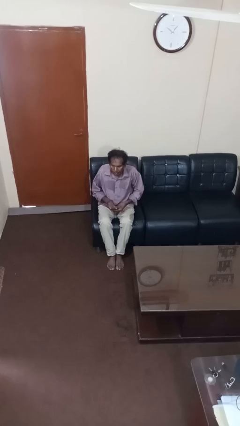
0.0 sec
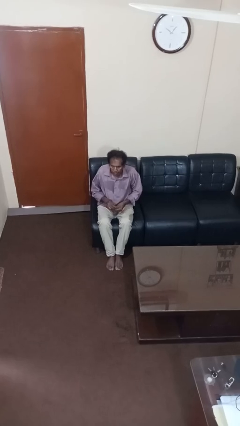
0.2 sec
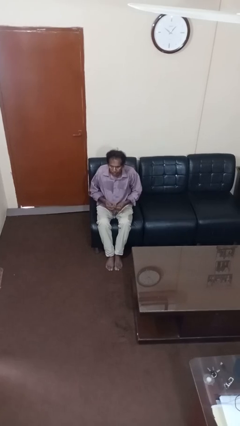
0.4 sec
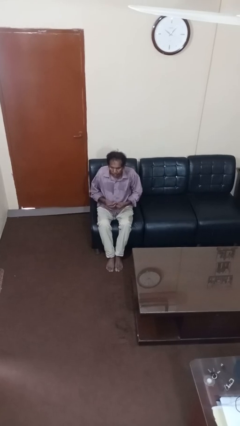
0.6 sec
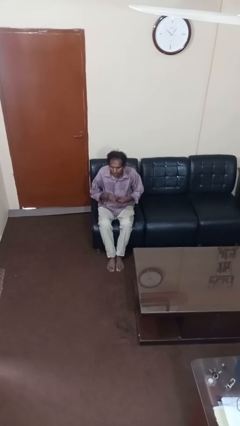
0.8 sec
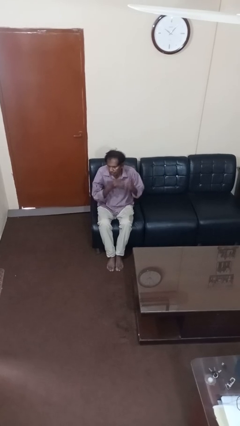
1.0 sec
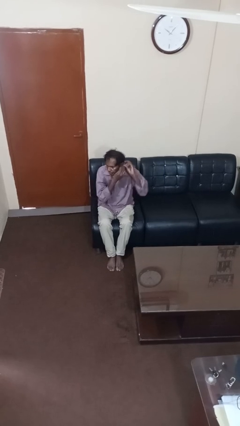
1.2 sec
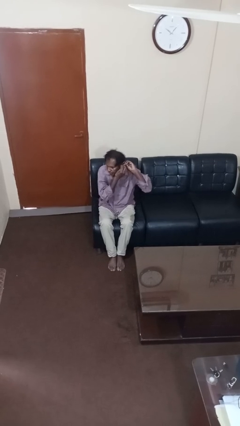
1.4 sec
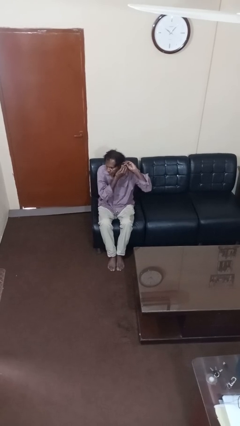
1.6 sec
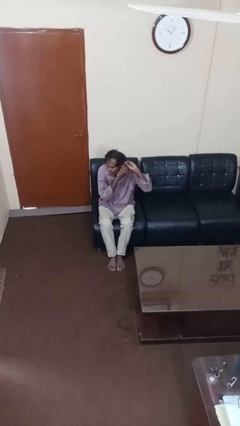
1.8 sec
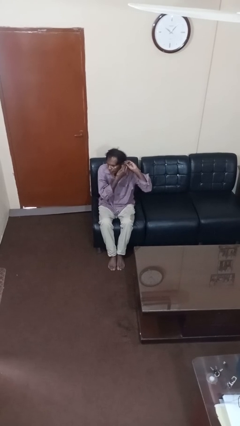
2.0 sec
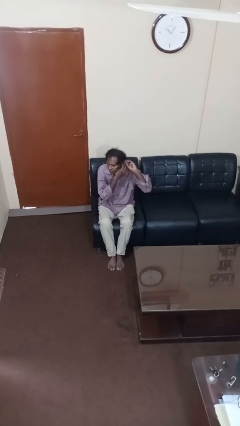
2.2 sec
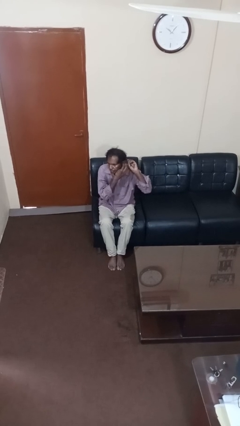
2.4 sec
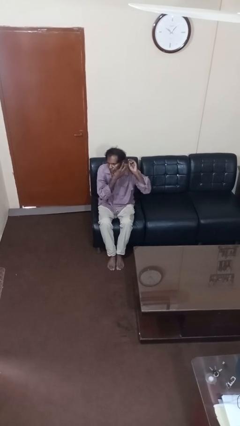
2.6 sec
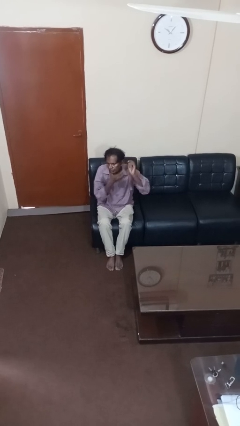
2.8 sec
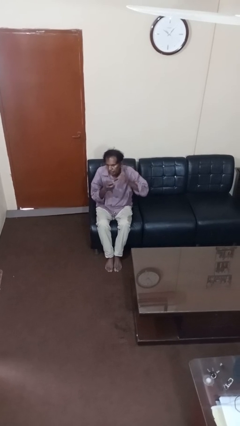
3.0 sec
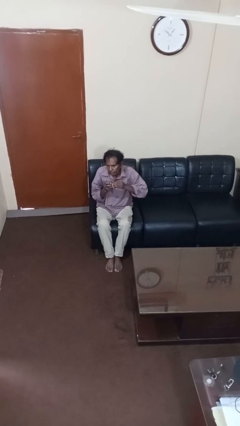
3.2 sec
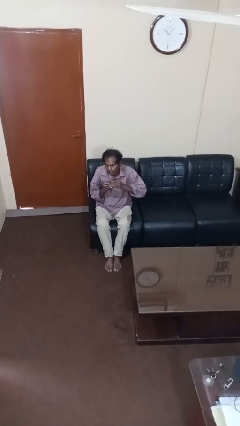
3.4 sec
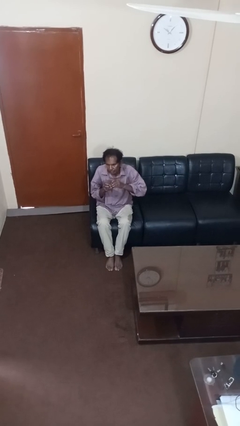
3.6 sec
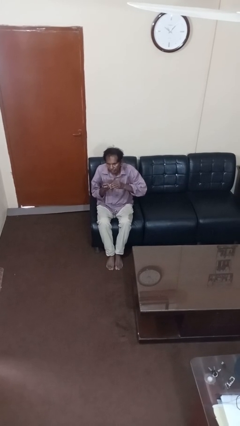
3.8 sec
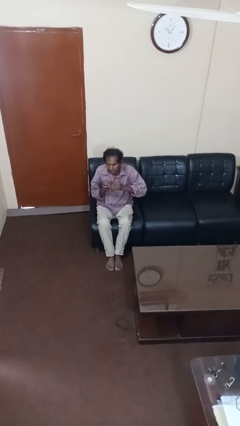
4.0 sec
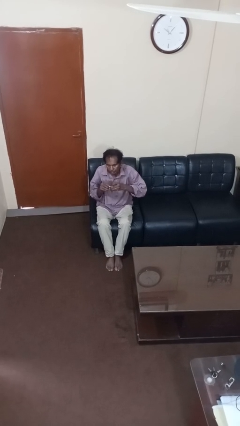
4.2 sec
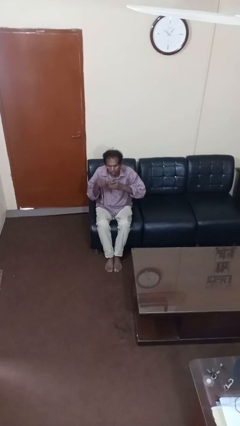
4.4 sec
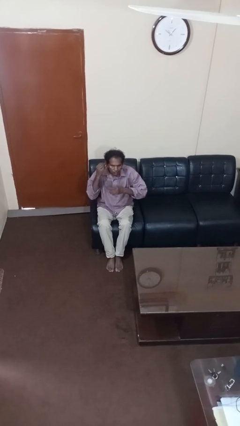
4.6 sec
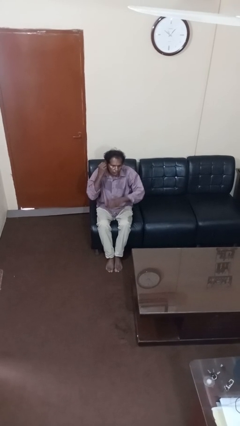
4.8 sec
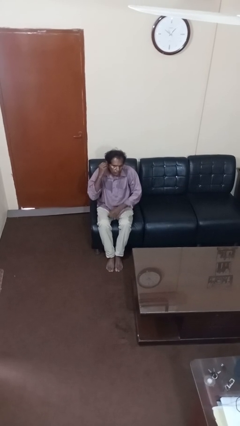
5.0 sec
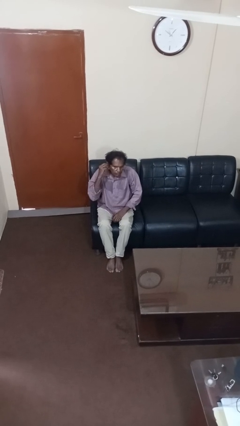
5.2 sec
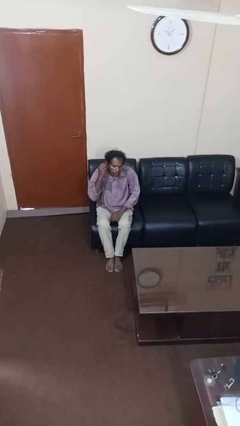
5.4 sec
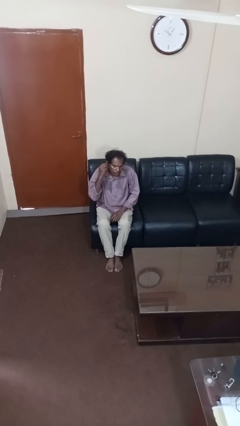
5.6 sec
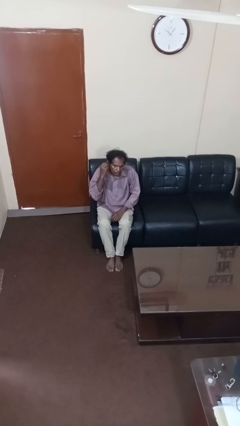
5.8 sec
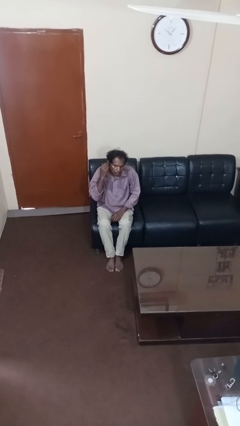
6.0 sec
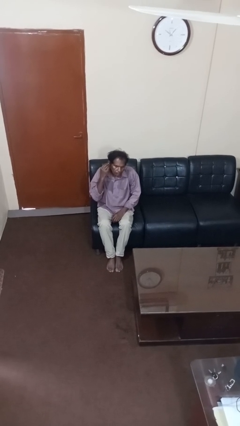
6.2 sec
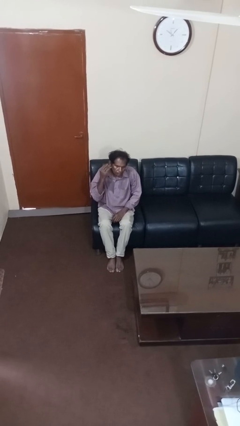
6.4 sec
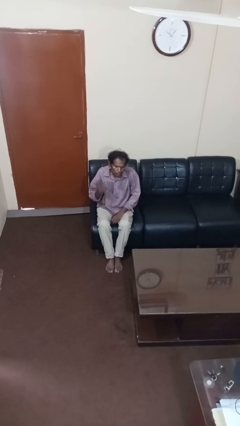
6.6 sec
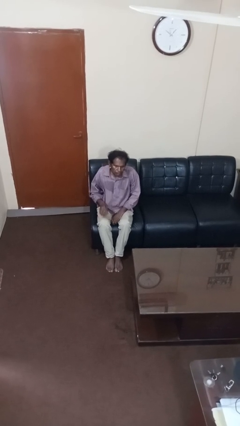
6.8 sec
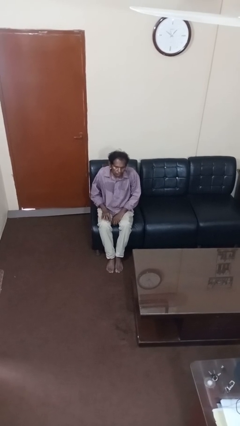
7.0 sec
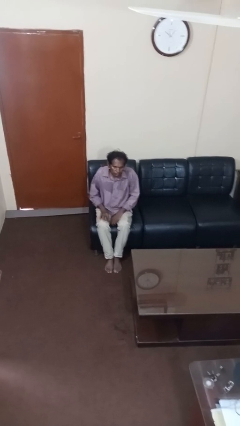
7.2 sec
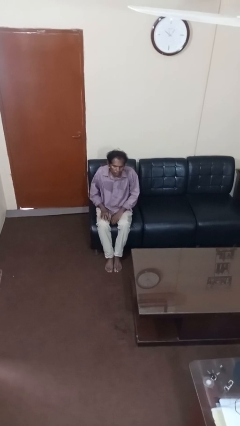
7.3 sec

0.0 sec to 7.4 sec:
person puts on earrings

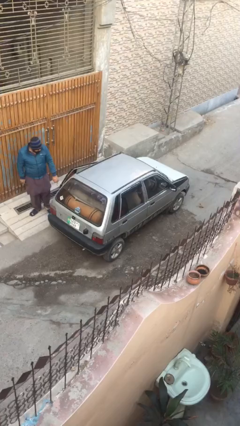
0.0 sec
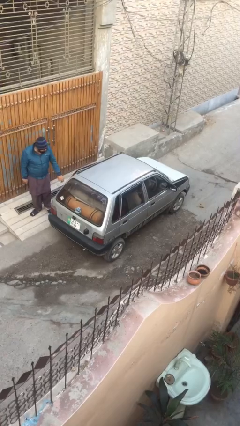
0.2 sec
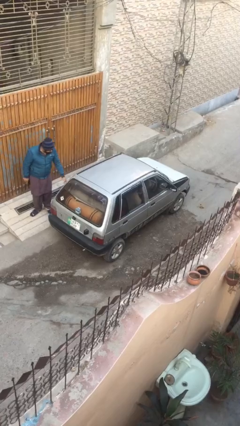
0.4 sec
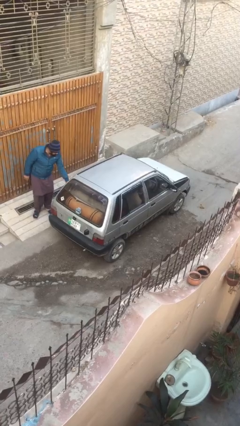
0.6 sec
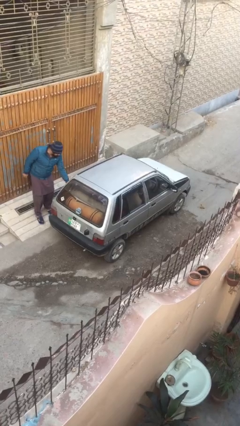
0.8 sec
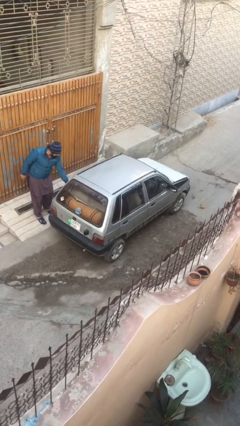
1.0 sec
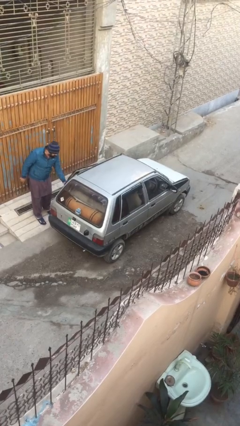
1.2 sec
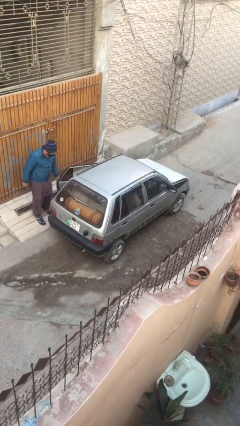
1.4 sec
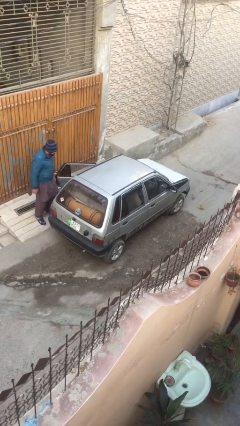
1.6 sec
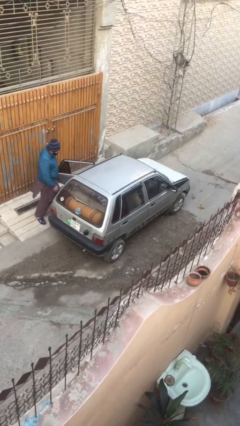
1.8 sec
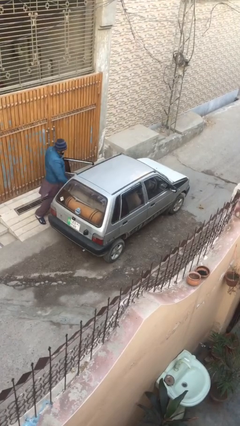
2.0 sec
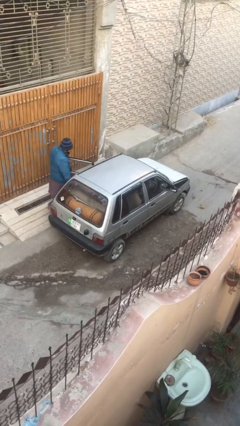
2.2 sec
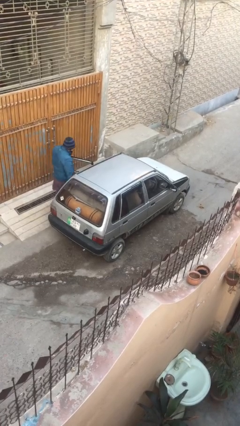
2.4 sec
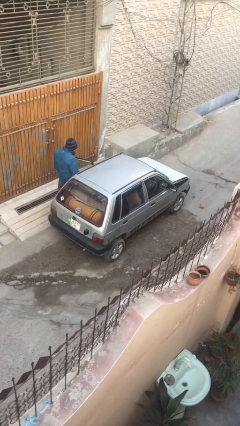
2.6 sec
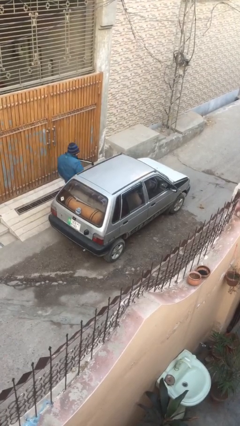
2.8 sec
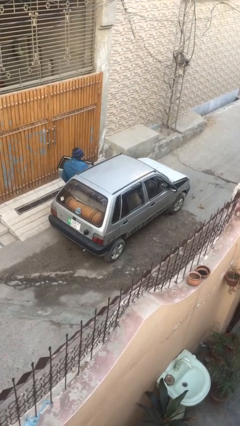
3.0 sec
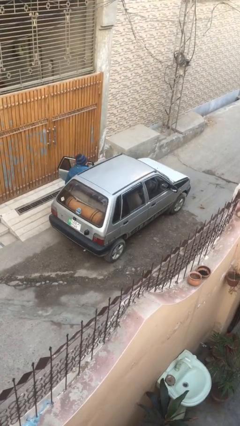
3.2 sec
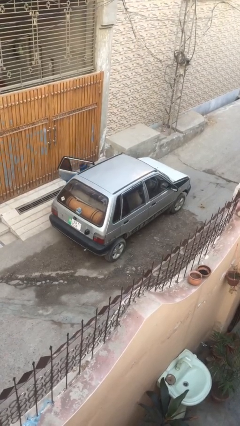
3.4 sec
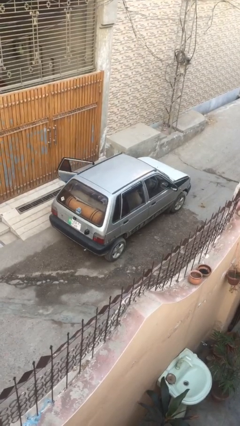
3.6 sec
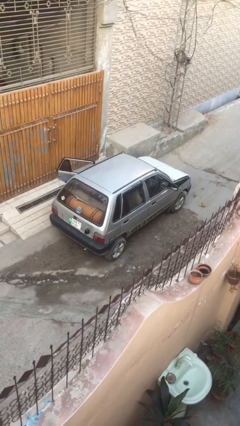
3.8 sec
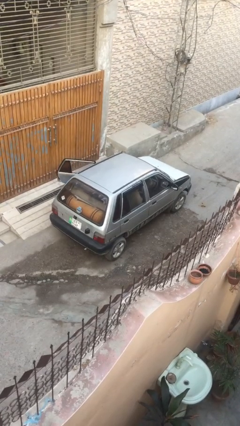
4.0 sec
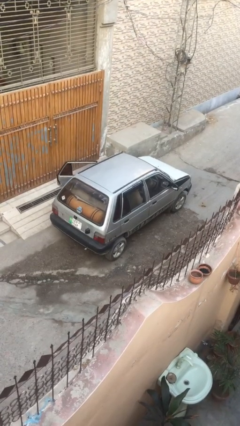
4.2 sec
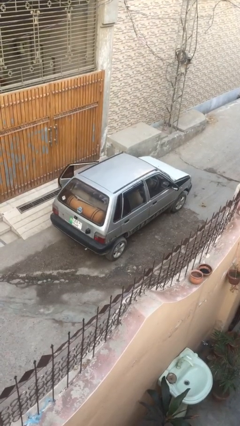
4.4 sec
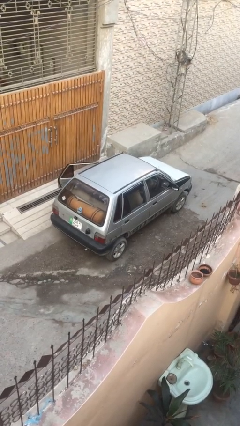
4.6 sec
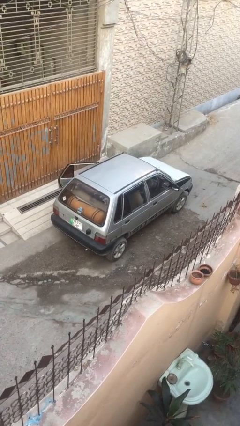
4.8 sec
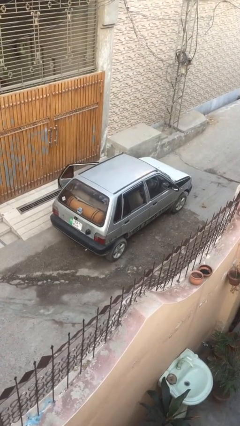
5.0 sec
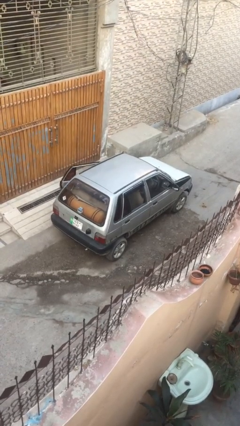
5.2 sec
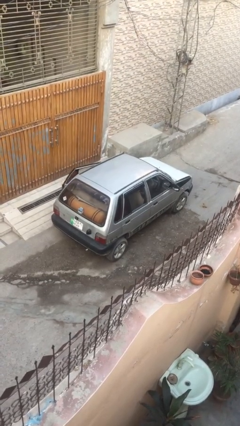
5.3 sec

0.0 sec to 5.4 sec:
car picks up person

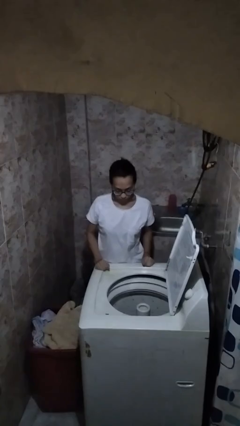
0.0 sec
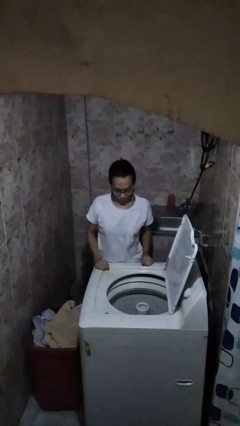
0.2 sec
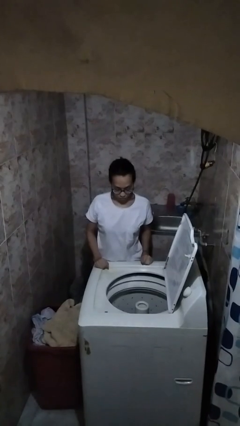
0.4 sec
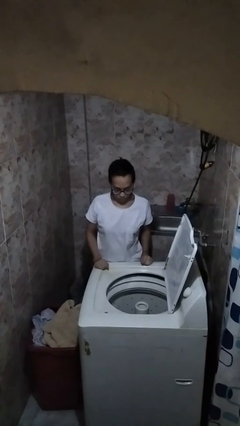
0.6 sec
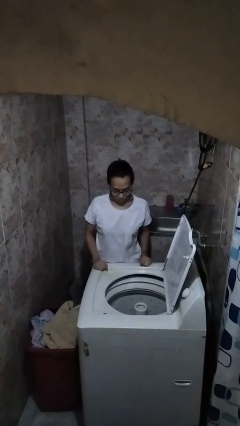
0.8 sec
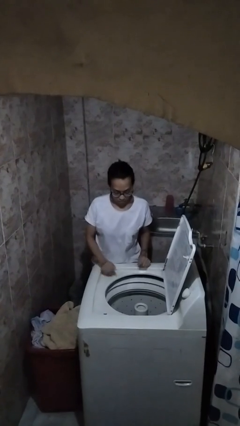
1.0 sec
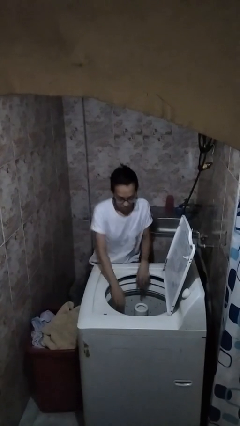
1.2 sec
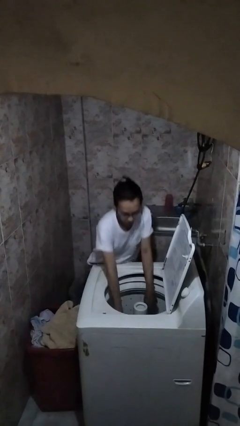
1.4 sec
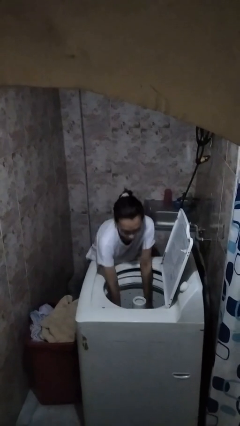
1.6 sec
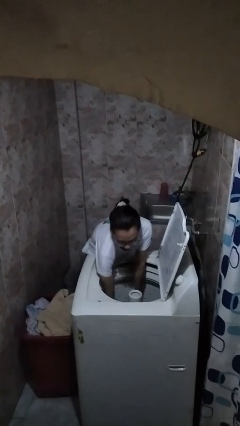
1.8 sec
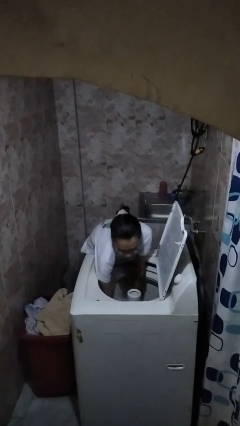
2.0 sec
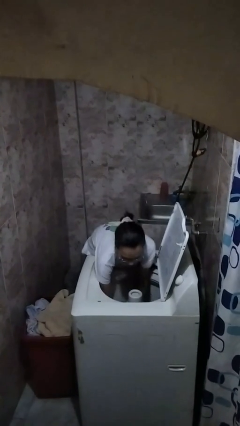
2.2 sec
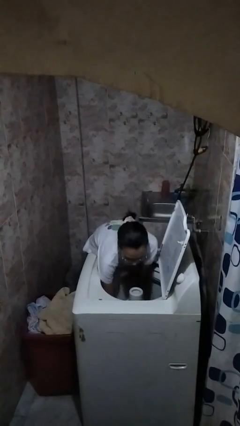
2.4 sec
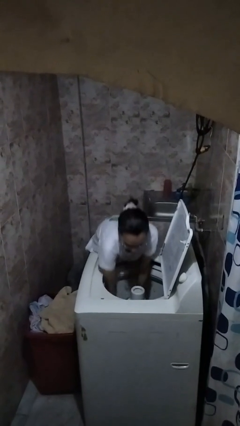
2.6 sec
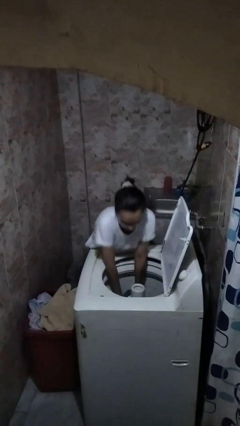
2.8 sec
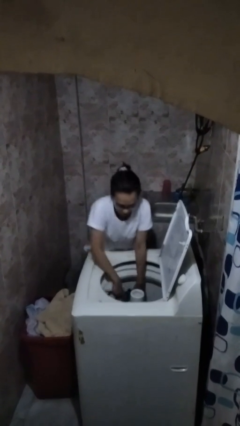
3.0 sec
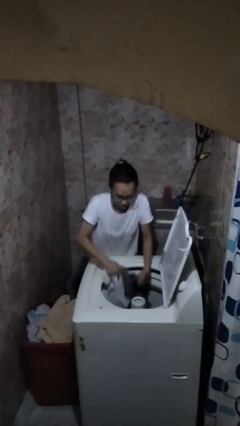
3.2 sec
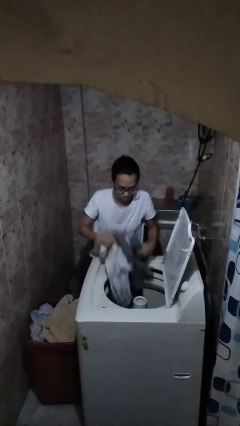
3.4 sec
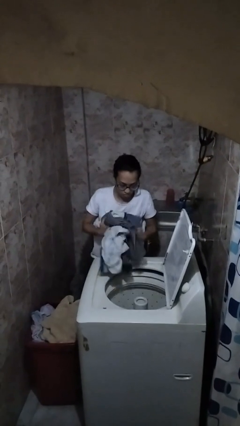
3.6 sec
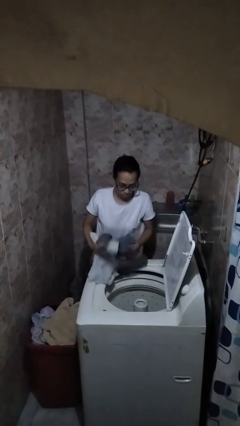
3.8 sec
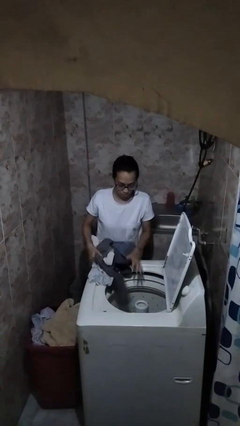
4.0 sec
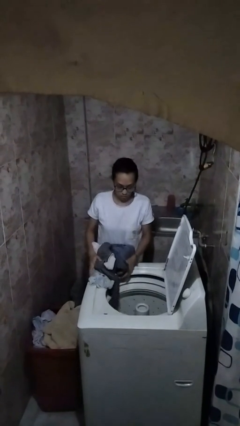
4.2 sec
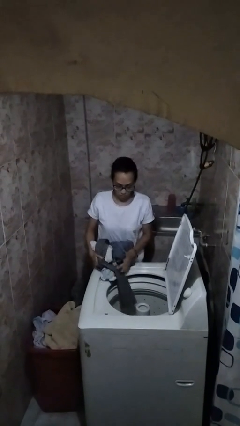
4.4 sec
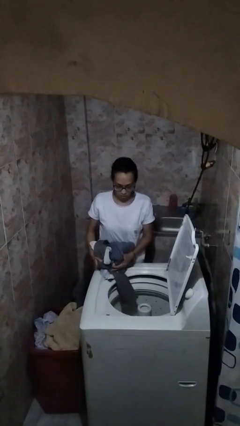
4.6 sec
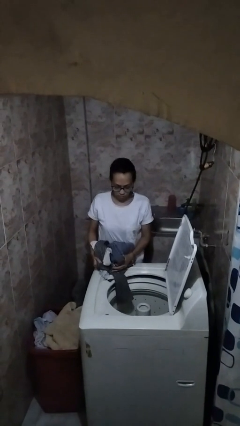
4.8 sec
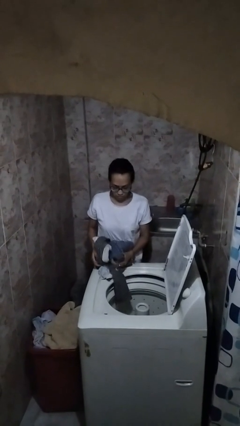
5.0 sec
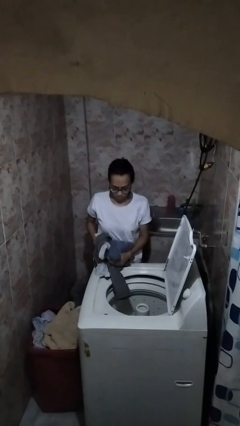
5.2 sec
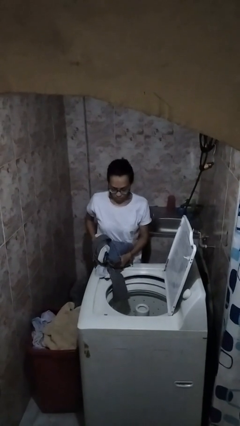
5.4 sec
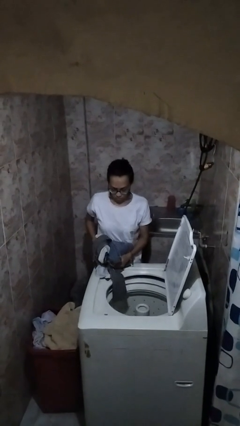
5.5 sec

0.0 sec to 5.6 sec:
person loads clotheswasher
